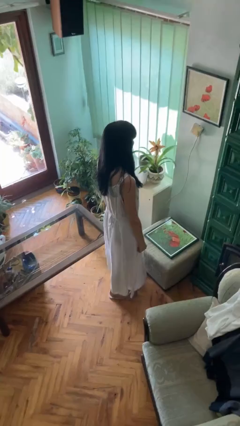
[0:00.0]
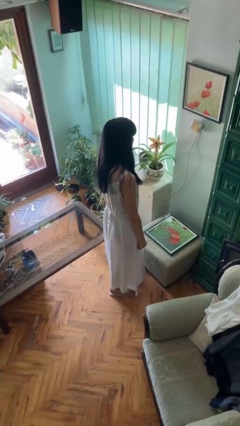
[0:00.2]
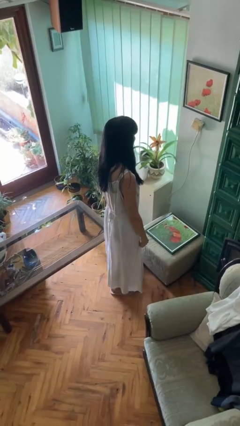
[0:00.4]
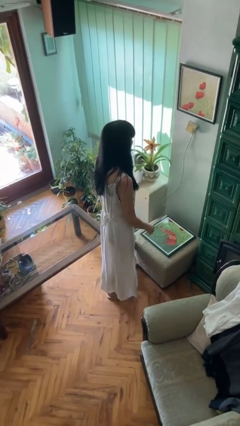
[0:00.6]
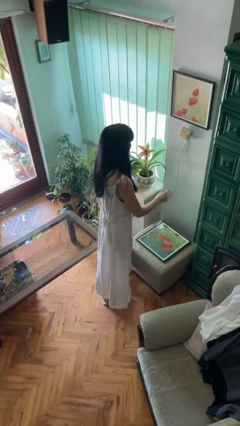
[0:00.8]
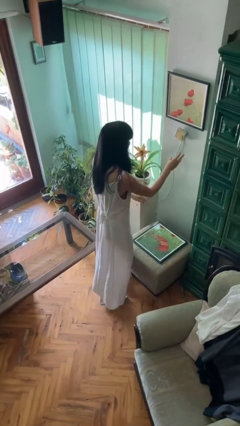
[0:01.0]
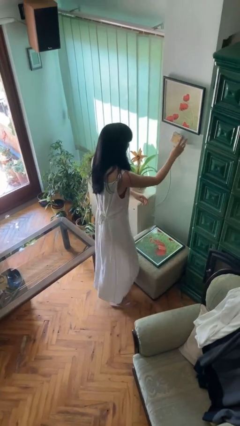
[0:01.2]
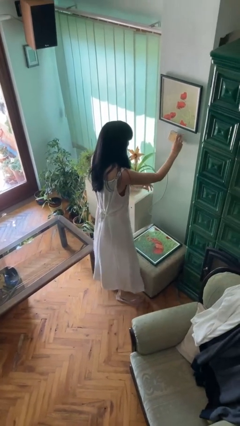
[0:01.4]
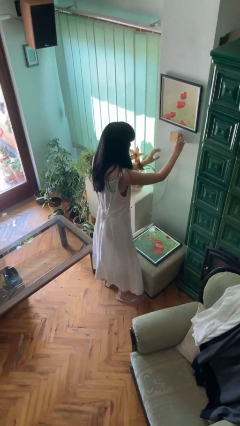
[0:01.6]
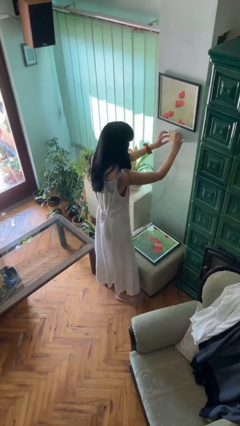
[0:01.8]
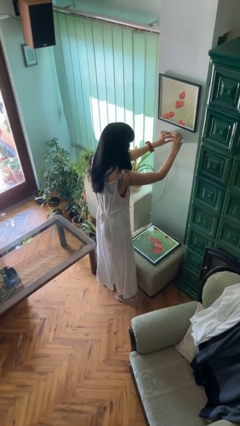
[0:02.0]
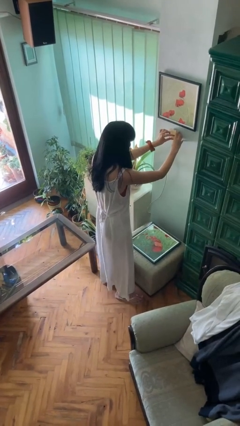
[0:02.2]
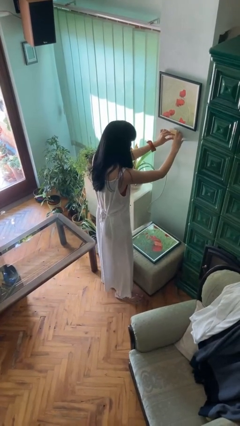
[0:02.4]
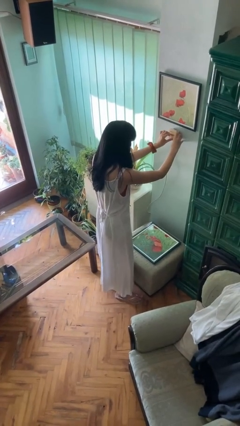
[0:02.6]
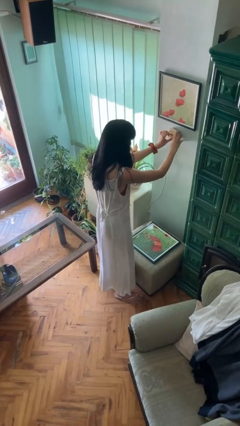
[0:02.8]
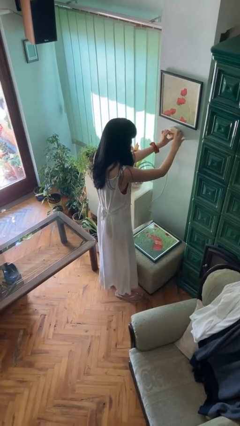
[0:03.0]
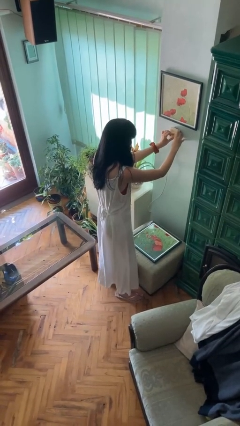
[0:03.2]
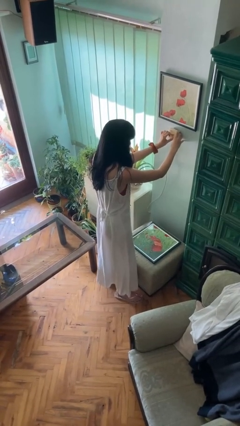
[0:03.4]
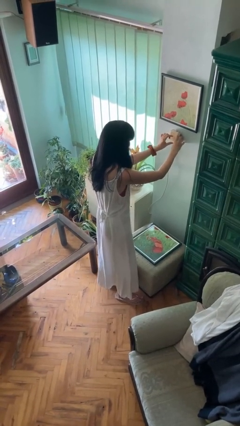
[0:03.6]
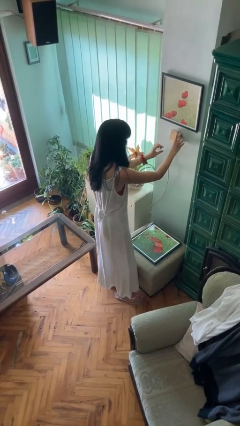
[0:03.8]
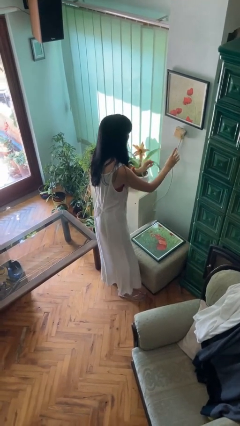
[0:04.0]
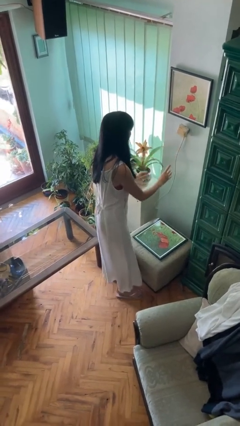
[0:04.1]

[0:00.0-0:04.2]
person adjusts thermostat

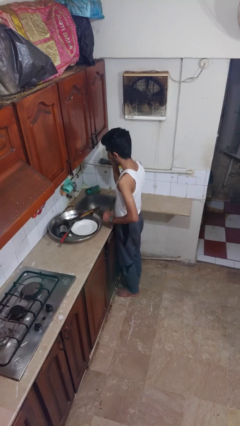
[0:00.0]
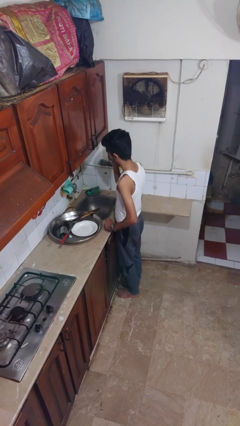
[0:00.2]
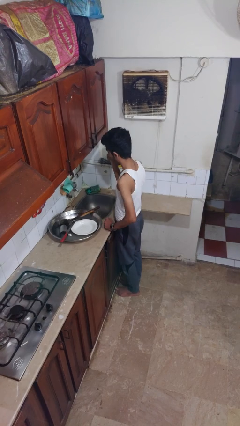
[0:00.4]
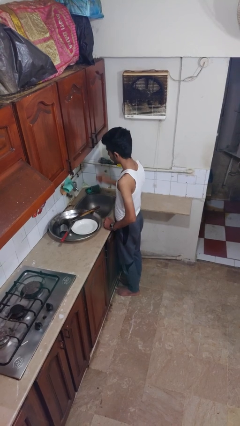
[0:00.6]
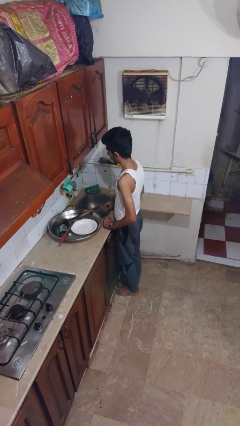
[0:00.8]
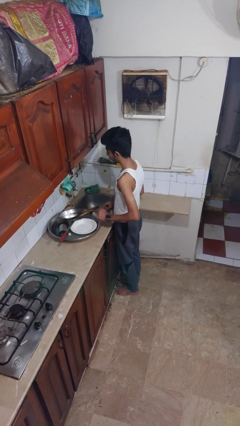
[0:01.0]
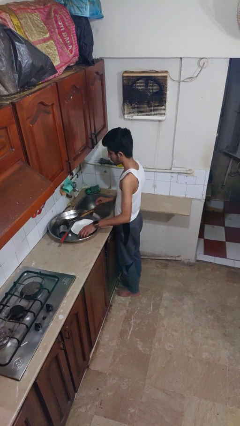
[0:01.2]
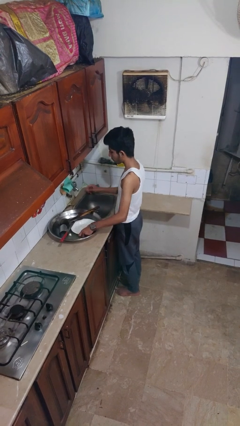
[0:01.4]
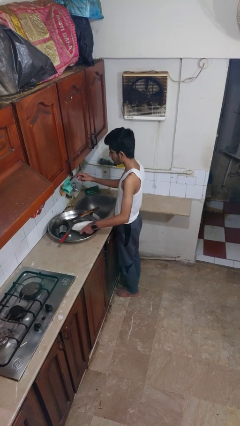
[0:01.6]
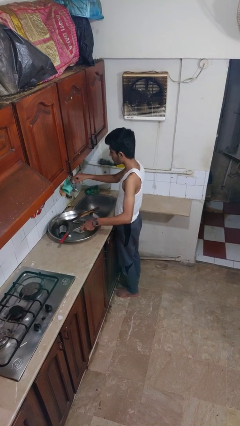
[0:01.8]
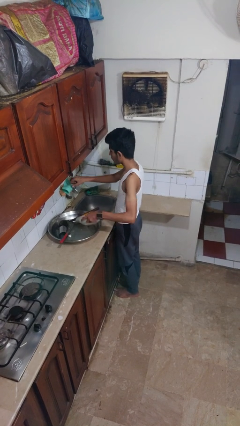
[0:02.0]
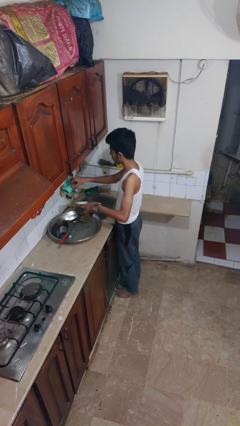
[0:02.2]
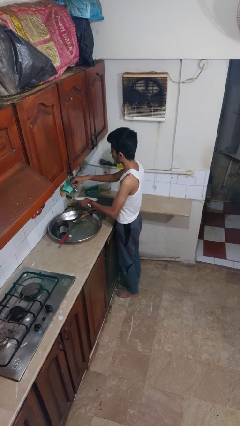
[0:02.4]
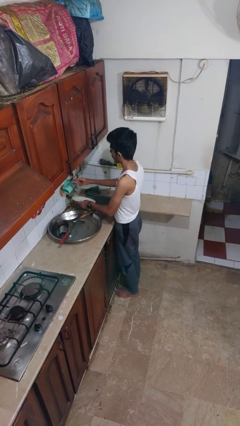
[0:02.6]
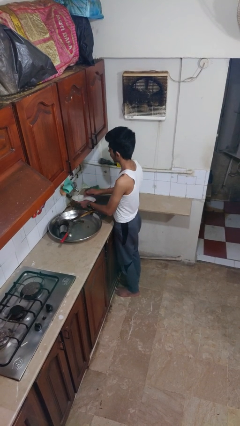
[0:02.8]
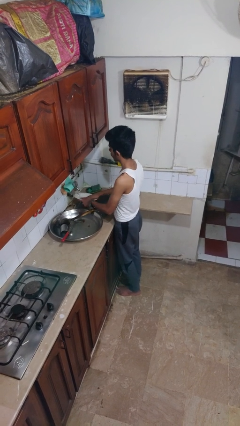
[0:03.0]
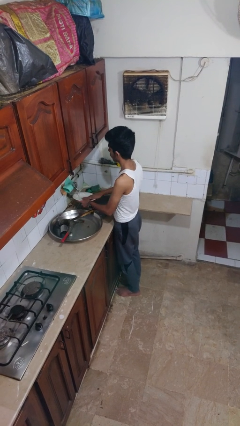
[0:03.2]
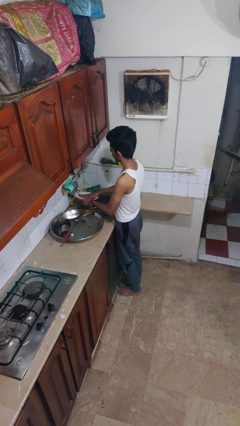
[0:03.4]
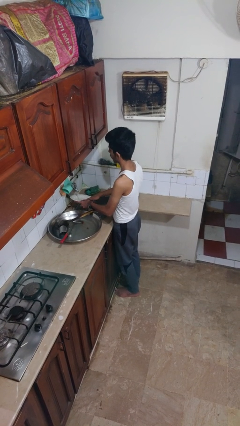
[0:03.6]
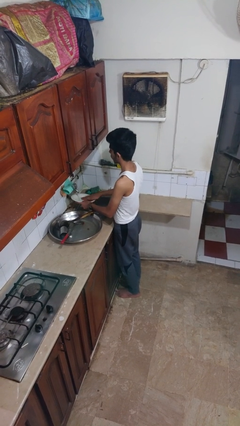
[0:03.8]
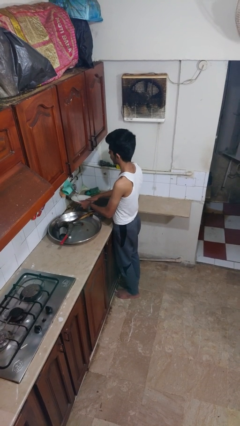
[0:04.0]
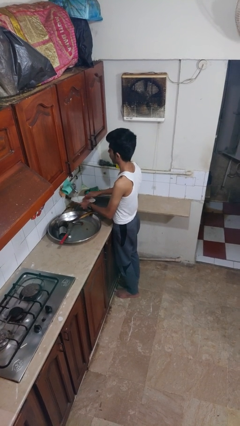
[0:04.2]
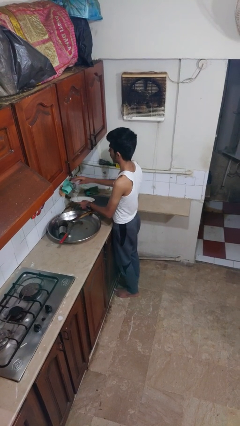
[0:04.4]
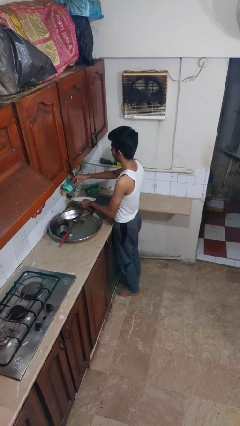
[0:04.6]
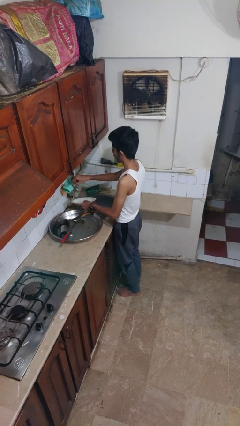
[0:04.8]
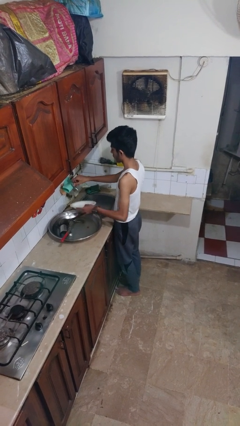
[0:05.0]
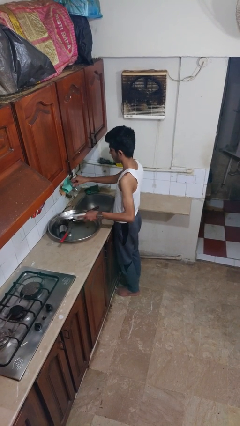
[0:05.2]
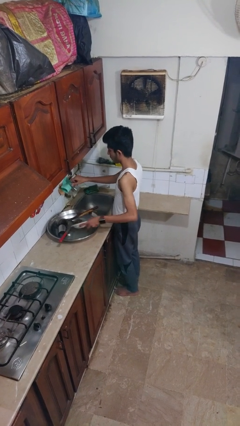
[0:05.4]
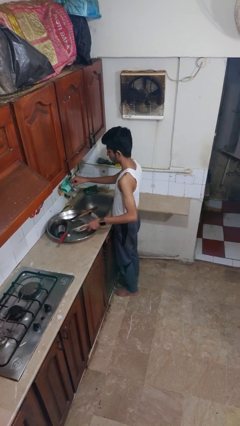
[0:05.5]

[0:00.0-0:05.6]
person washes dish

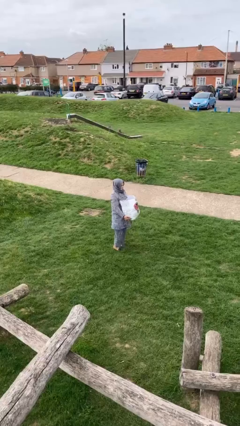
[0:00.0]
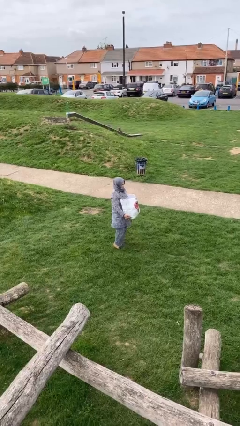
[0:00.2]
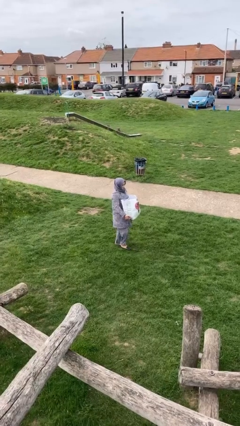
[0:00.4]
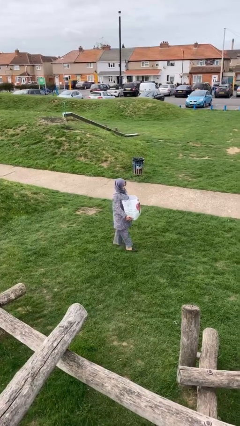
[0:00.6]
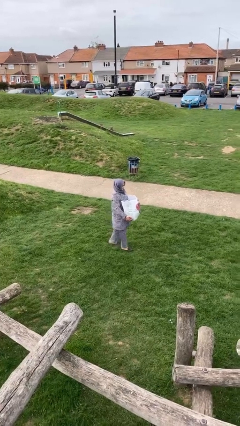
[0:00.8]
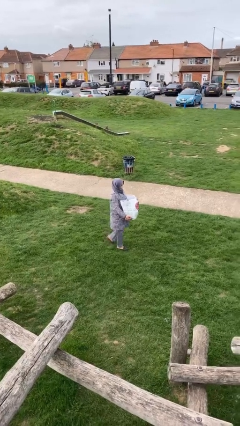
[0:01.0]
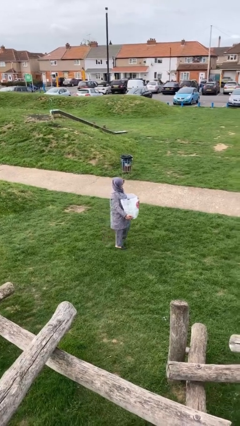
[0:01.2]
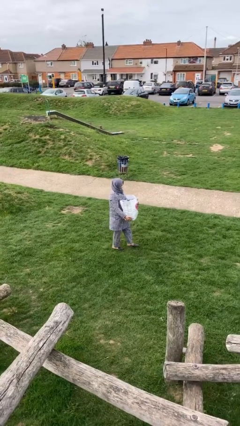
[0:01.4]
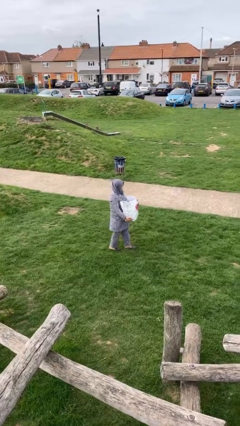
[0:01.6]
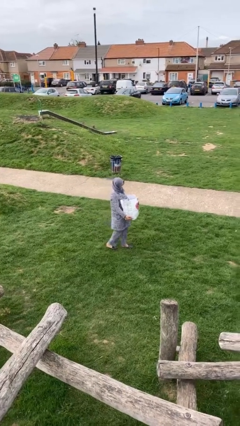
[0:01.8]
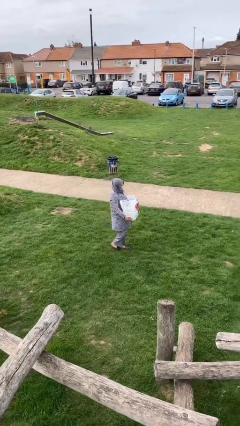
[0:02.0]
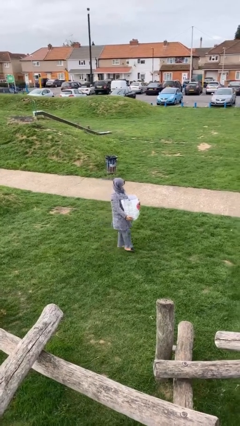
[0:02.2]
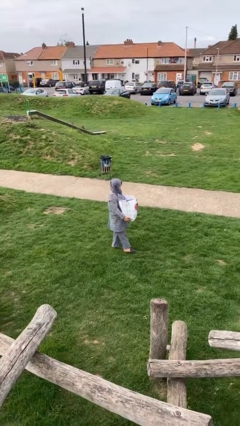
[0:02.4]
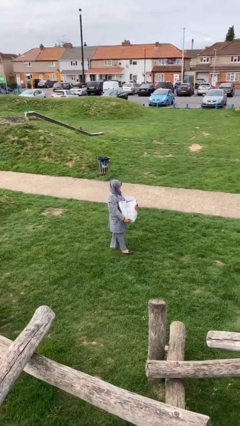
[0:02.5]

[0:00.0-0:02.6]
person carries heavy object

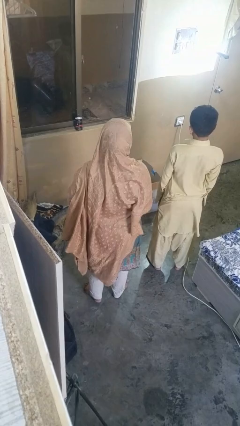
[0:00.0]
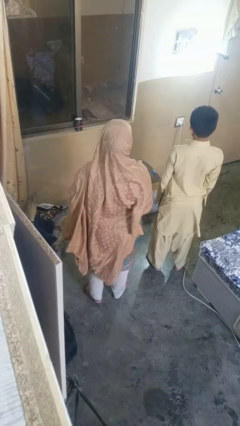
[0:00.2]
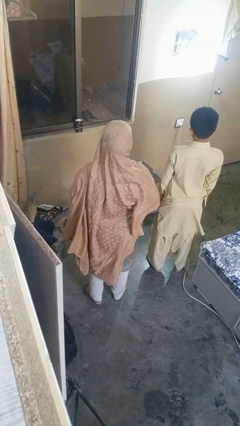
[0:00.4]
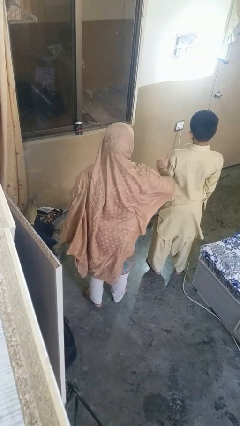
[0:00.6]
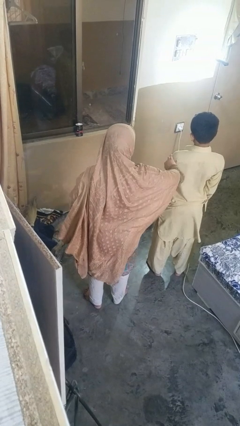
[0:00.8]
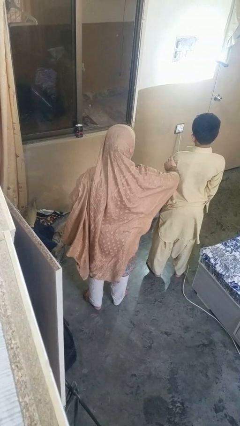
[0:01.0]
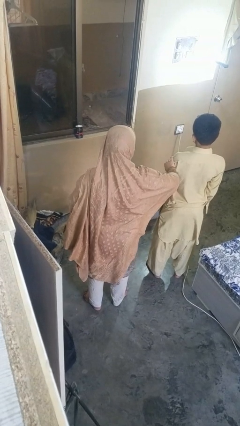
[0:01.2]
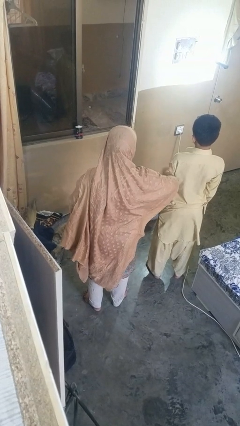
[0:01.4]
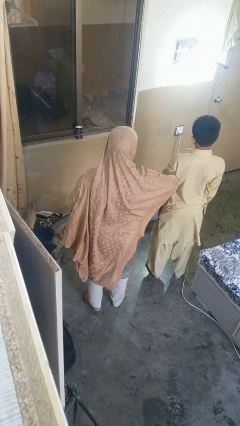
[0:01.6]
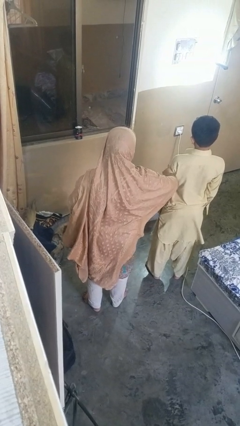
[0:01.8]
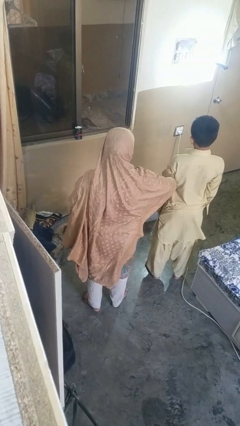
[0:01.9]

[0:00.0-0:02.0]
person grabs person by bicep

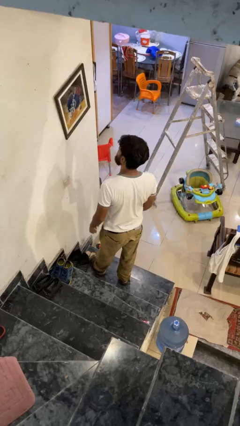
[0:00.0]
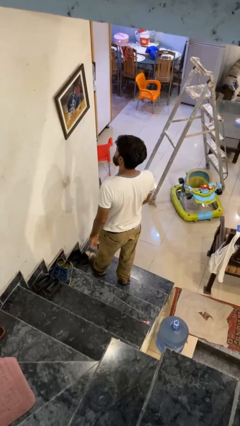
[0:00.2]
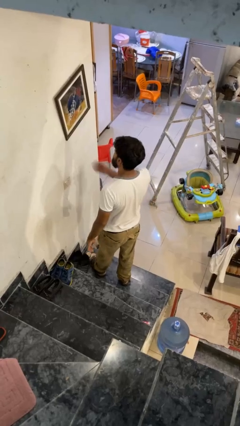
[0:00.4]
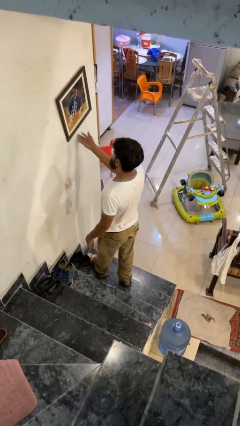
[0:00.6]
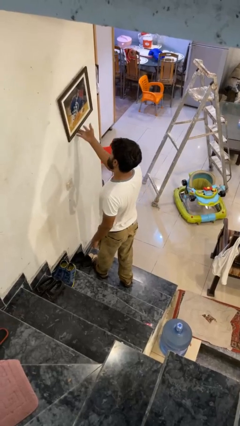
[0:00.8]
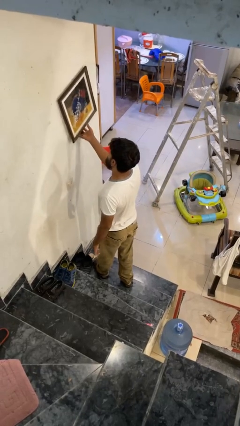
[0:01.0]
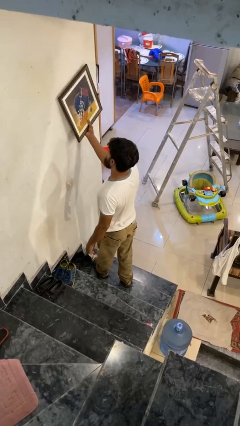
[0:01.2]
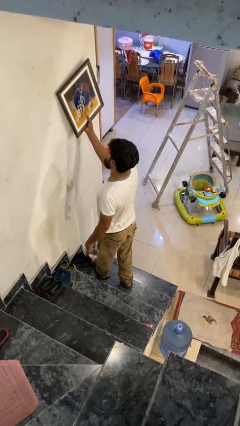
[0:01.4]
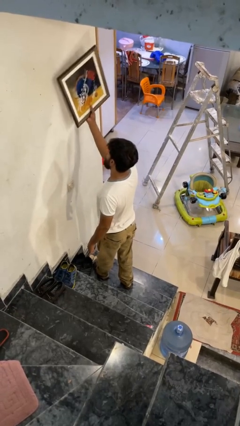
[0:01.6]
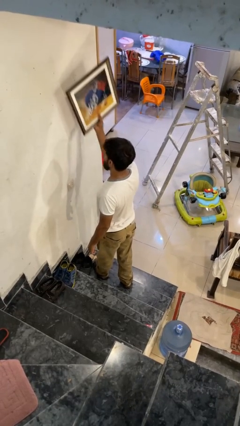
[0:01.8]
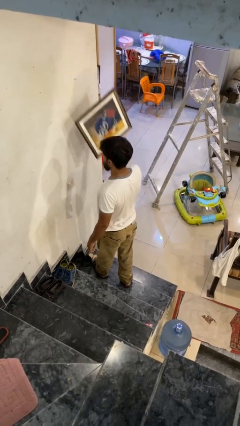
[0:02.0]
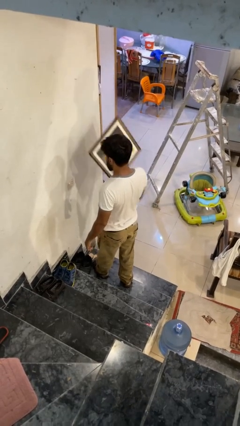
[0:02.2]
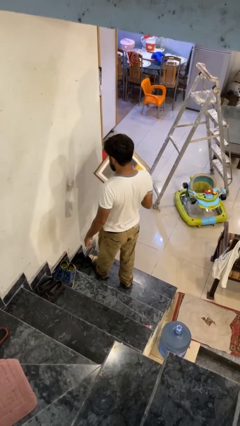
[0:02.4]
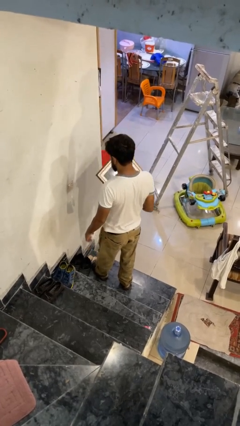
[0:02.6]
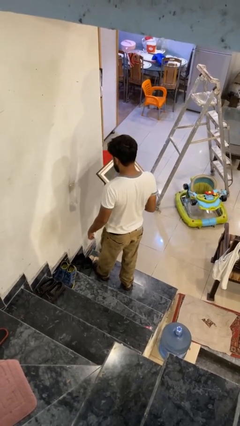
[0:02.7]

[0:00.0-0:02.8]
person takes down picture frame

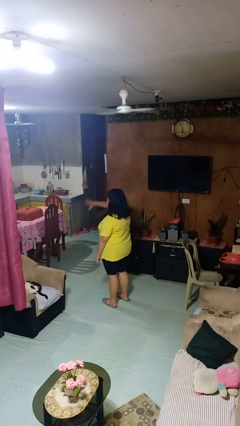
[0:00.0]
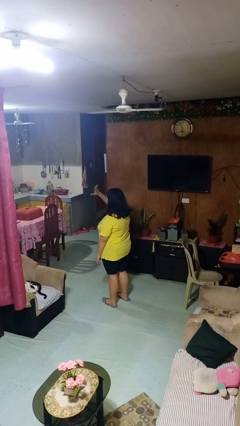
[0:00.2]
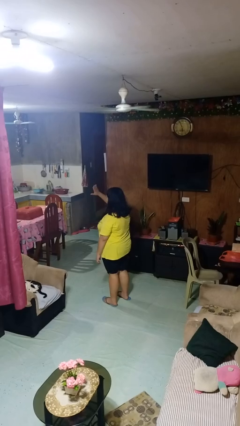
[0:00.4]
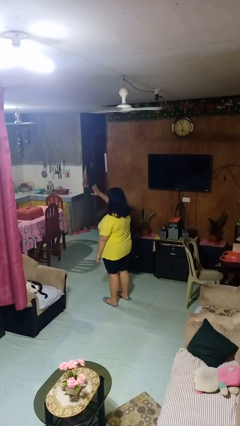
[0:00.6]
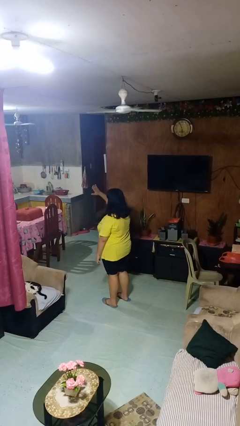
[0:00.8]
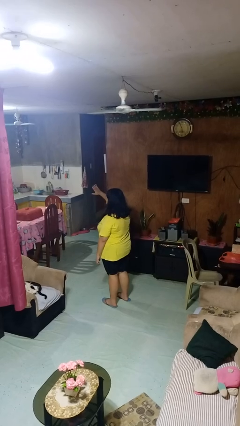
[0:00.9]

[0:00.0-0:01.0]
person gestures swipe up
